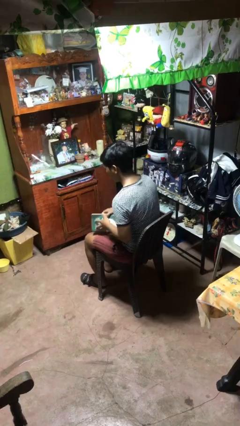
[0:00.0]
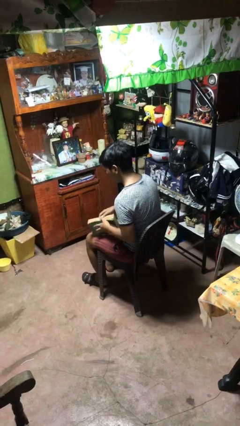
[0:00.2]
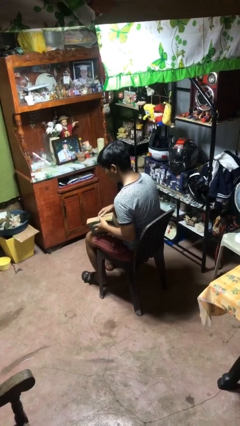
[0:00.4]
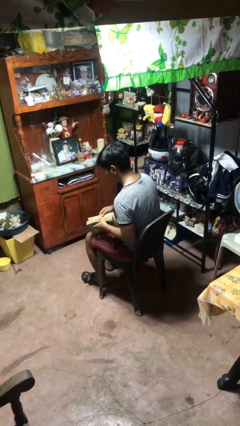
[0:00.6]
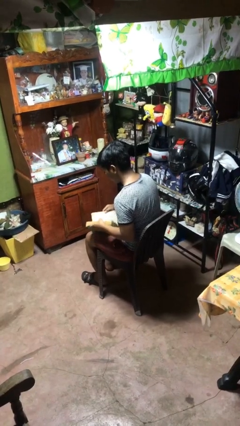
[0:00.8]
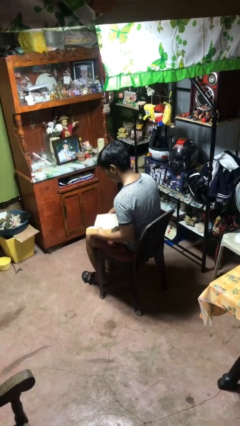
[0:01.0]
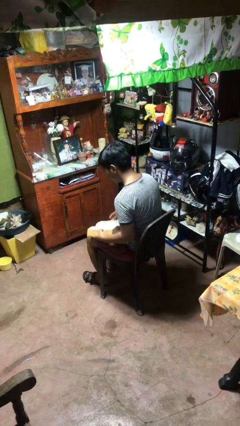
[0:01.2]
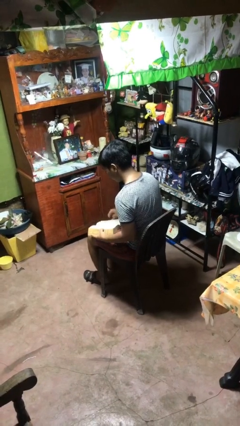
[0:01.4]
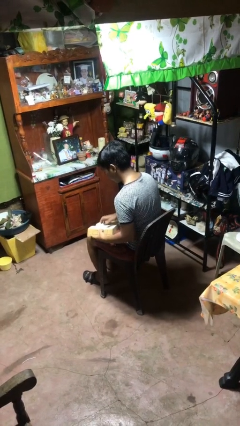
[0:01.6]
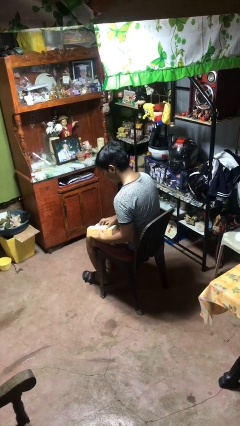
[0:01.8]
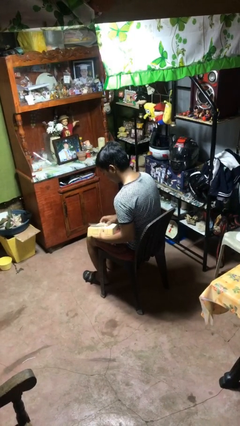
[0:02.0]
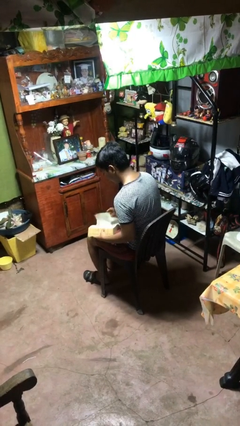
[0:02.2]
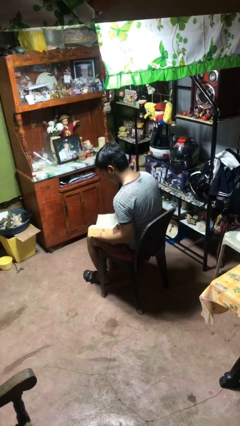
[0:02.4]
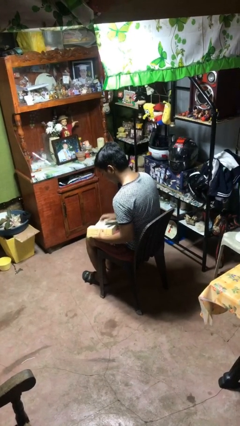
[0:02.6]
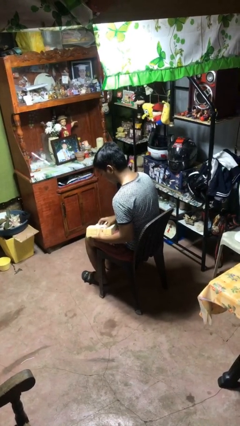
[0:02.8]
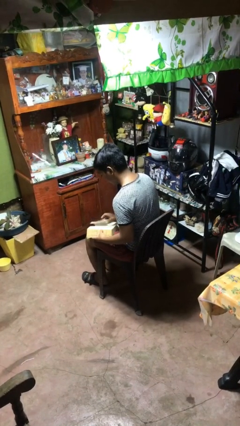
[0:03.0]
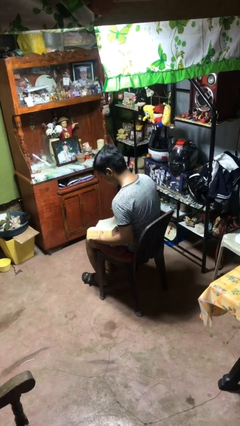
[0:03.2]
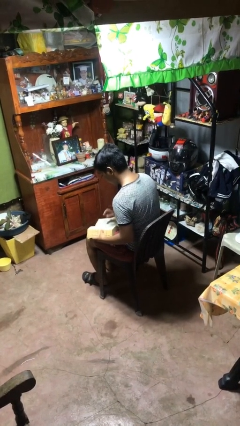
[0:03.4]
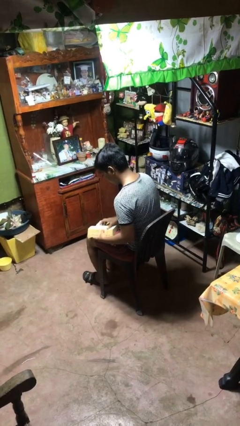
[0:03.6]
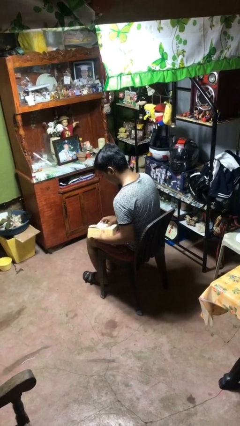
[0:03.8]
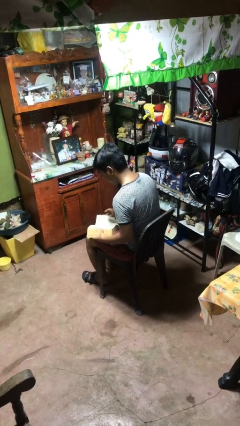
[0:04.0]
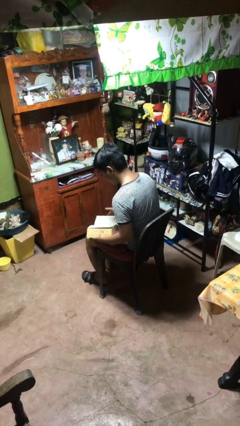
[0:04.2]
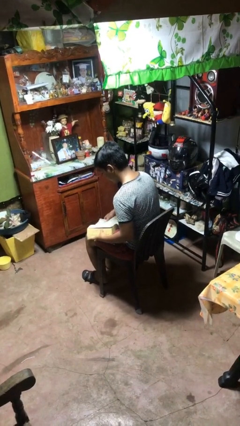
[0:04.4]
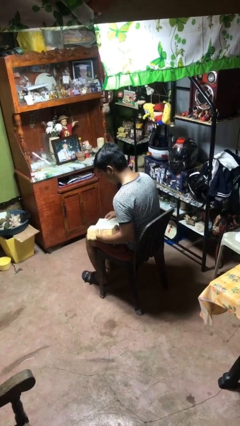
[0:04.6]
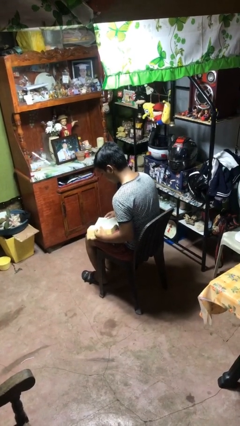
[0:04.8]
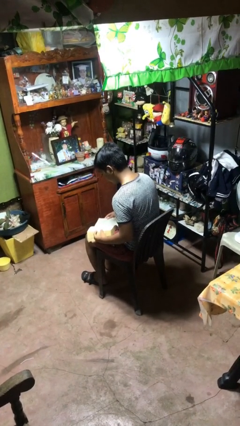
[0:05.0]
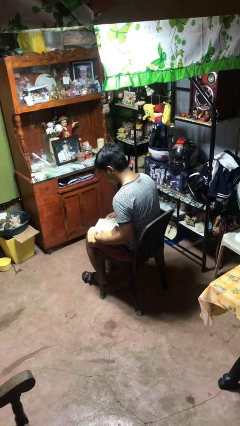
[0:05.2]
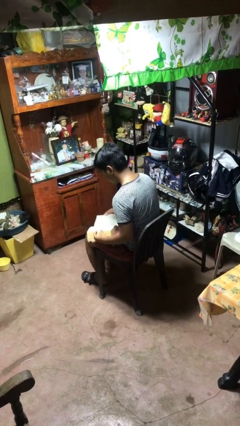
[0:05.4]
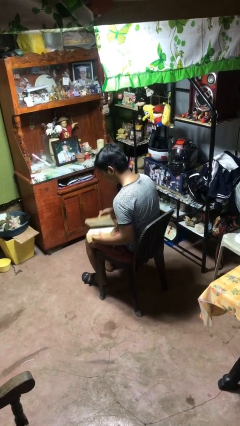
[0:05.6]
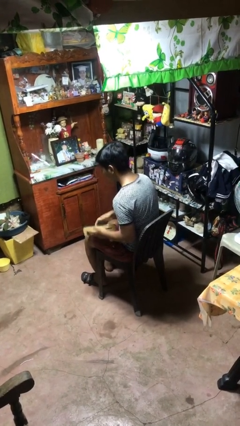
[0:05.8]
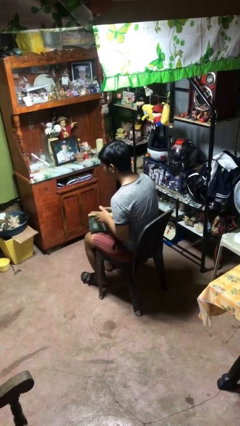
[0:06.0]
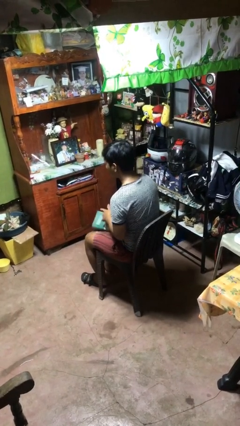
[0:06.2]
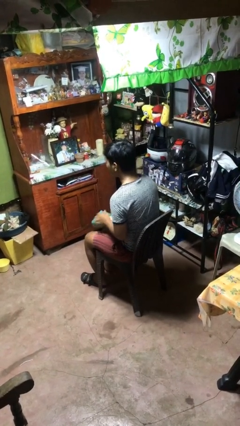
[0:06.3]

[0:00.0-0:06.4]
person reads book

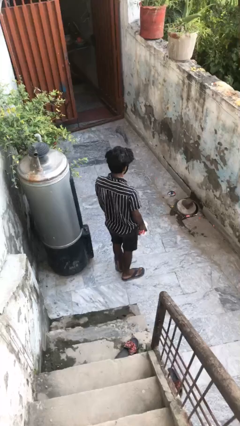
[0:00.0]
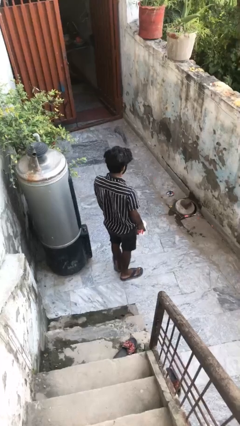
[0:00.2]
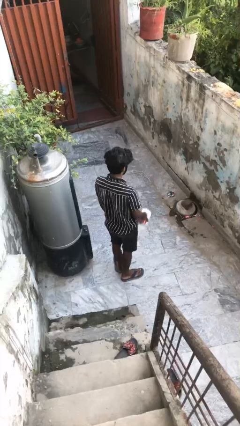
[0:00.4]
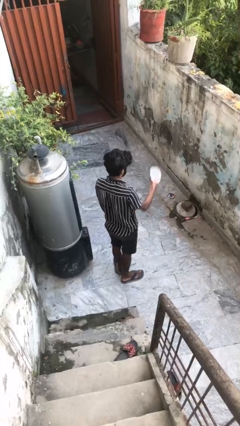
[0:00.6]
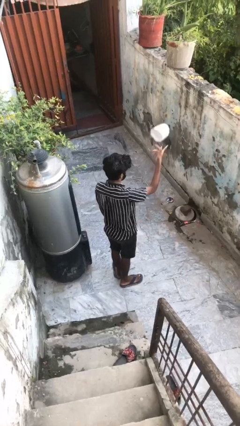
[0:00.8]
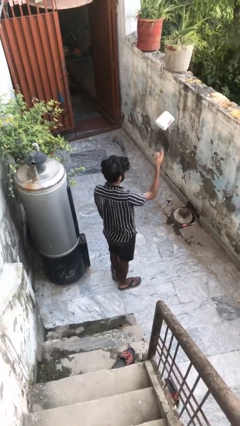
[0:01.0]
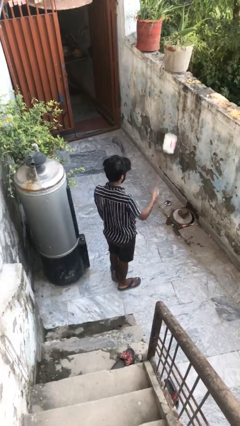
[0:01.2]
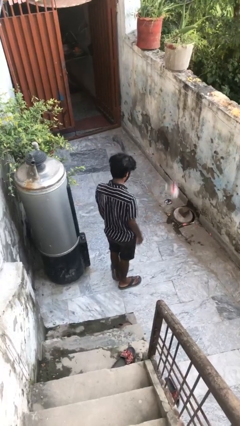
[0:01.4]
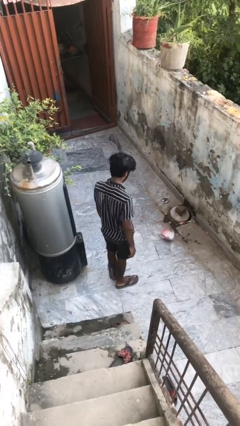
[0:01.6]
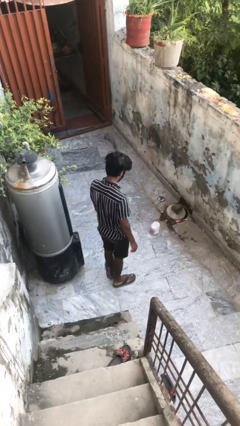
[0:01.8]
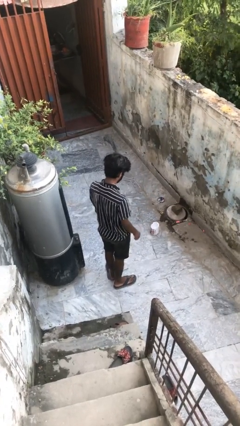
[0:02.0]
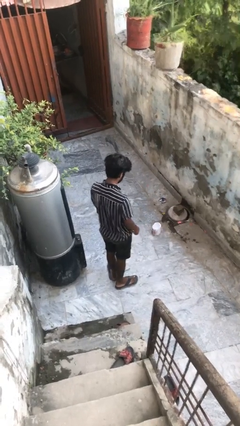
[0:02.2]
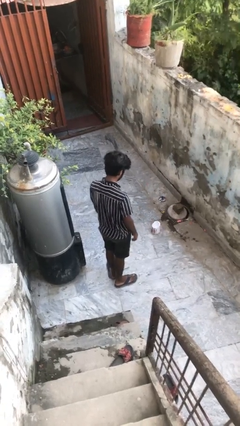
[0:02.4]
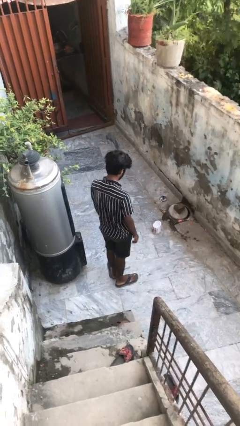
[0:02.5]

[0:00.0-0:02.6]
person throws object into air

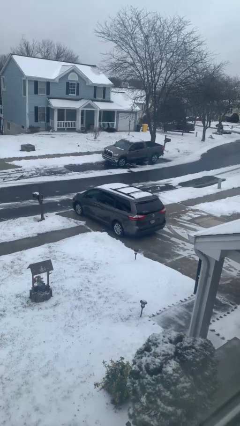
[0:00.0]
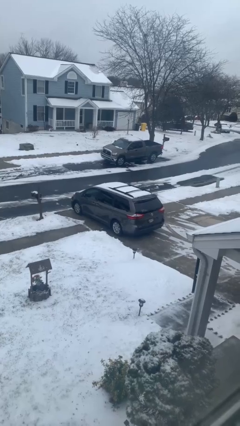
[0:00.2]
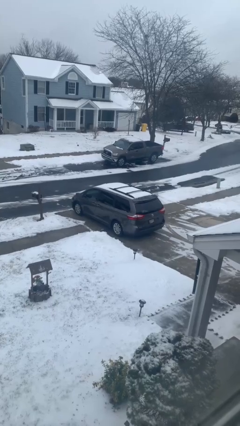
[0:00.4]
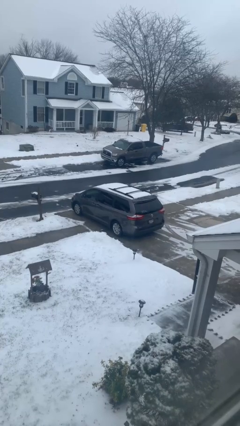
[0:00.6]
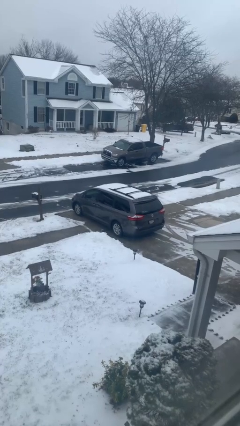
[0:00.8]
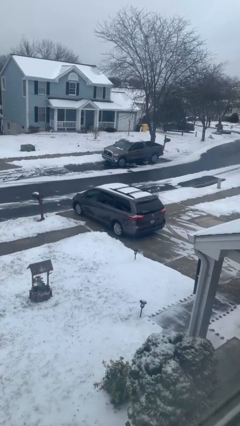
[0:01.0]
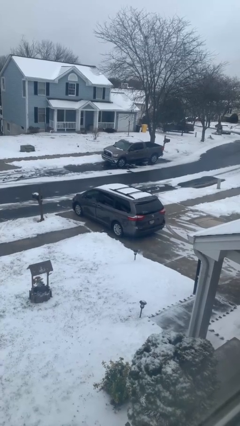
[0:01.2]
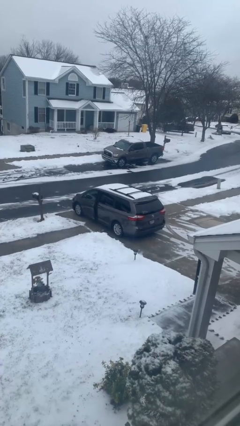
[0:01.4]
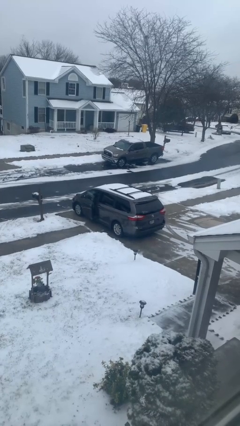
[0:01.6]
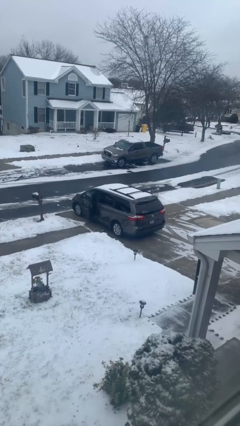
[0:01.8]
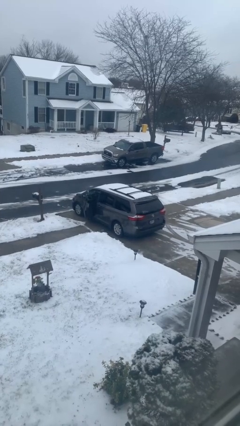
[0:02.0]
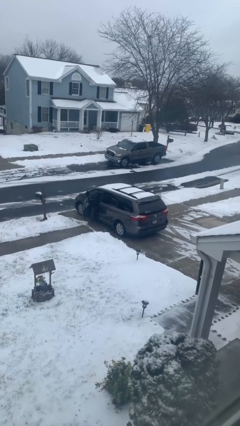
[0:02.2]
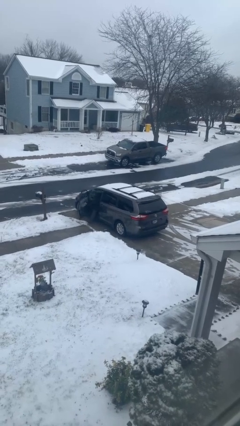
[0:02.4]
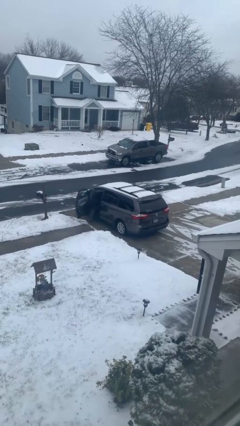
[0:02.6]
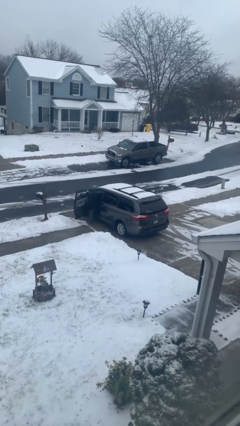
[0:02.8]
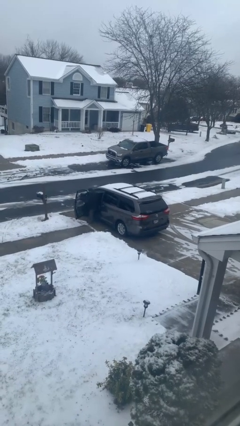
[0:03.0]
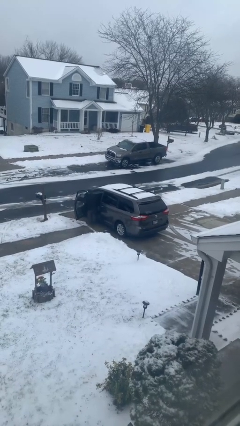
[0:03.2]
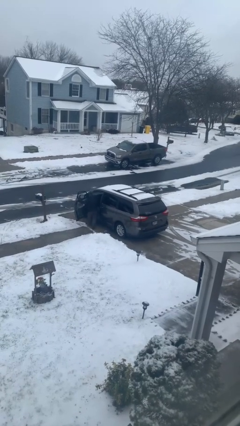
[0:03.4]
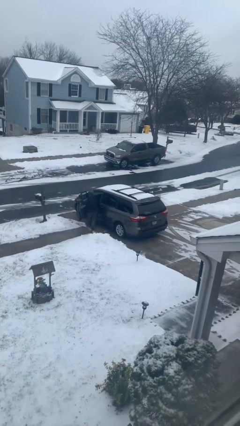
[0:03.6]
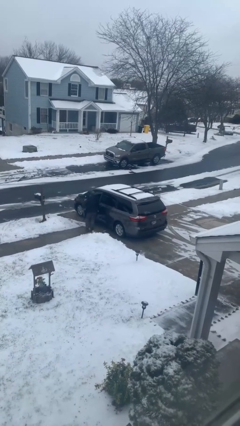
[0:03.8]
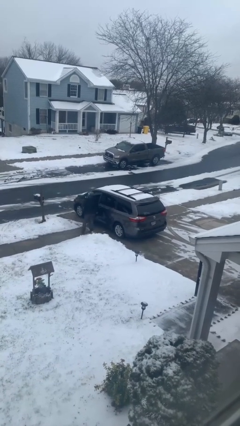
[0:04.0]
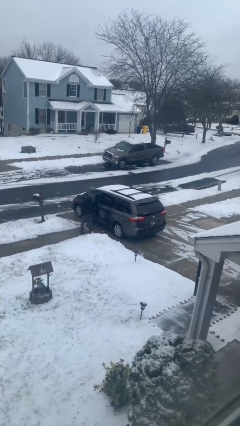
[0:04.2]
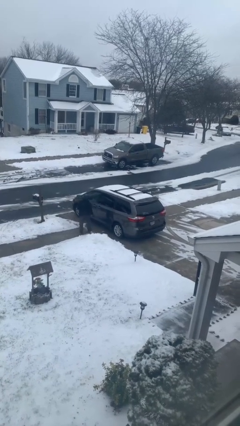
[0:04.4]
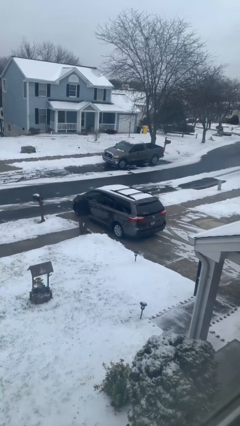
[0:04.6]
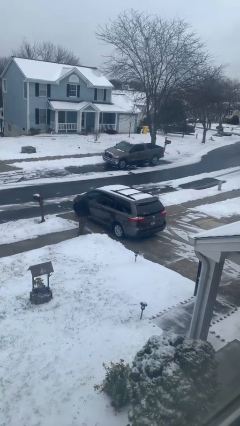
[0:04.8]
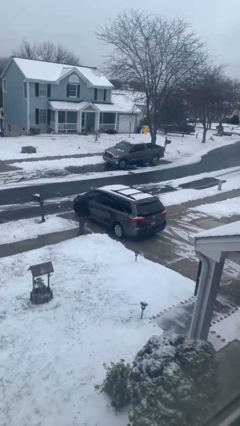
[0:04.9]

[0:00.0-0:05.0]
car drops off person

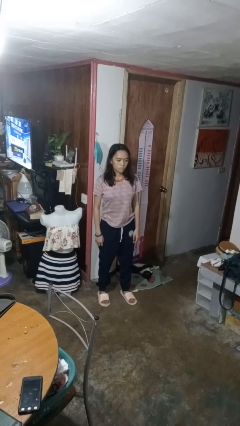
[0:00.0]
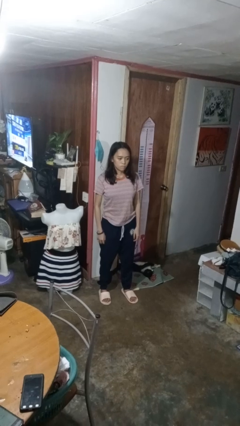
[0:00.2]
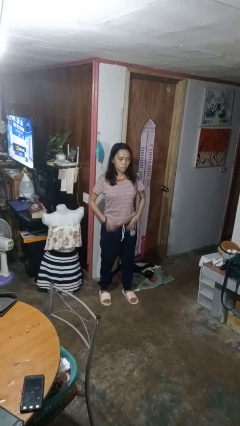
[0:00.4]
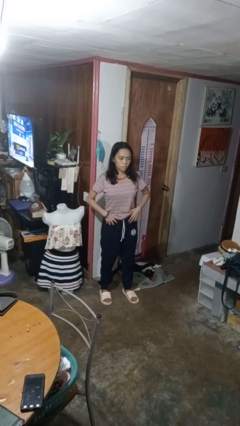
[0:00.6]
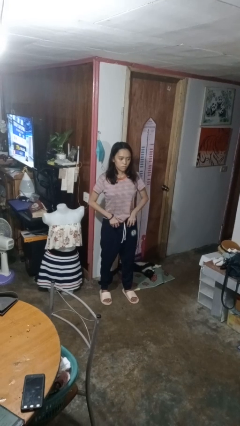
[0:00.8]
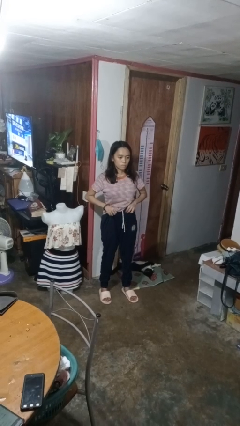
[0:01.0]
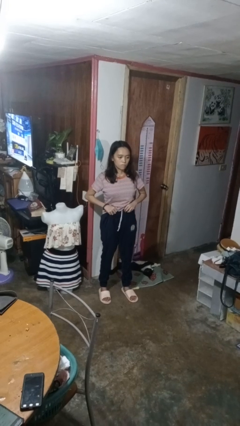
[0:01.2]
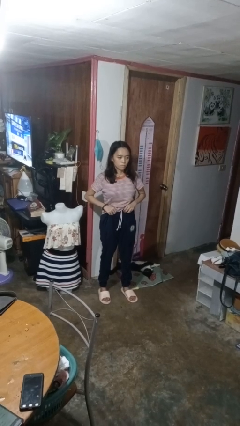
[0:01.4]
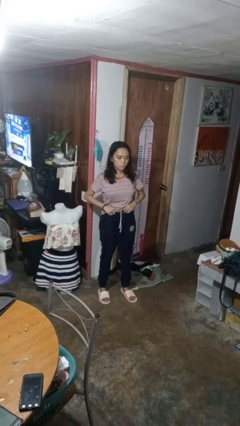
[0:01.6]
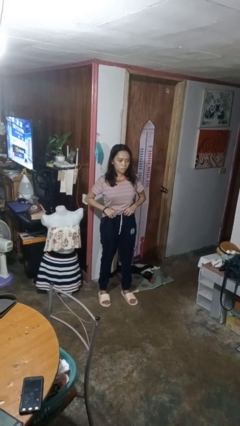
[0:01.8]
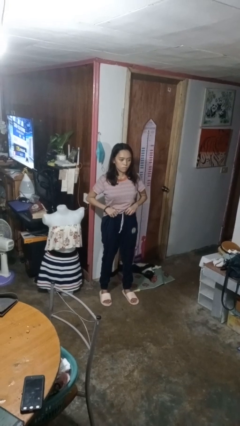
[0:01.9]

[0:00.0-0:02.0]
person hikes up pants

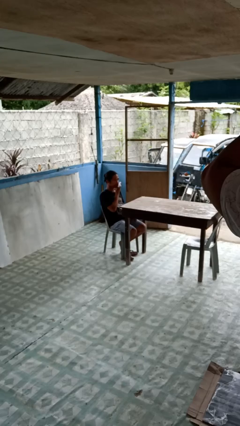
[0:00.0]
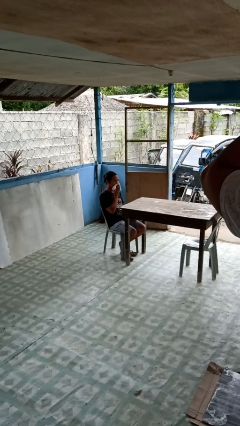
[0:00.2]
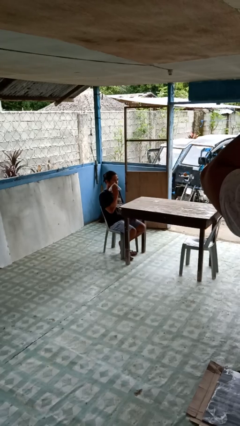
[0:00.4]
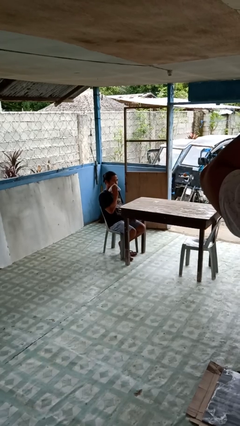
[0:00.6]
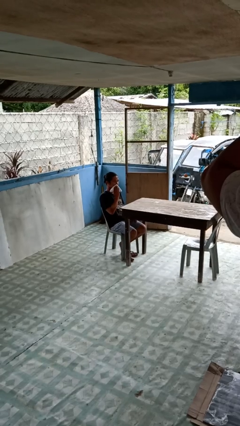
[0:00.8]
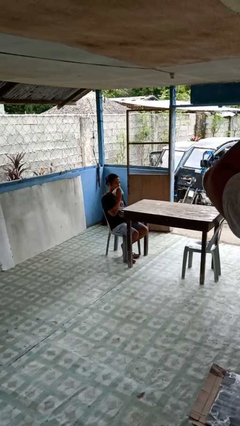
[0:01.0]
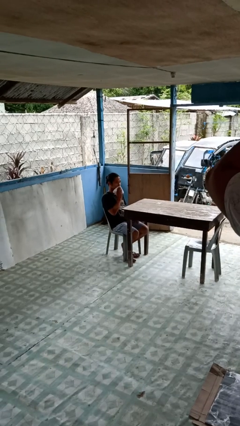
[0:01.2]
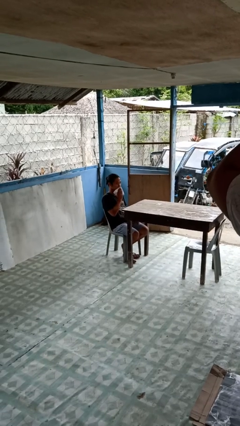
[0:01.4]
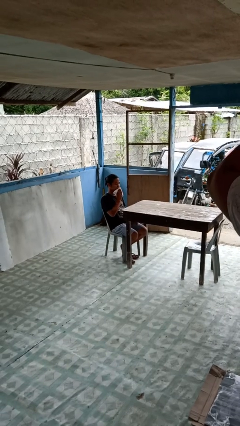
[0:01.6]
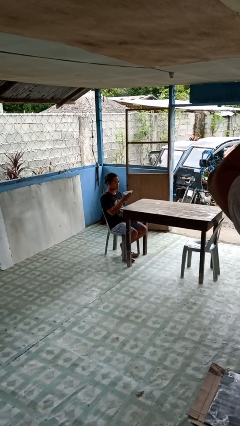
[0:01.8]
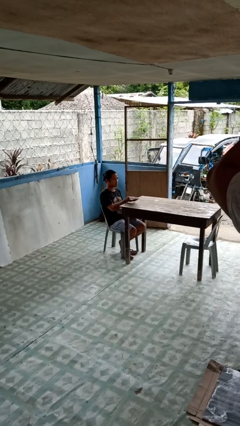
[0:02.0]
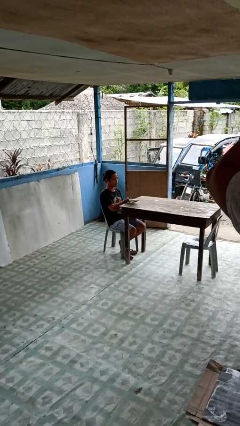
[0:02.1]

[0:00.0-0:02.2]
person wipes mouth with napkin
